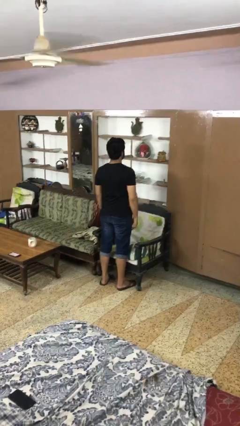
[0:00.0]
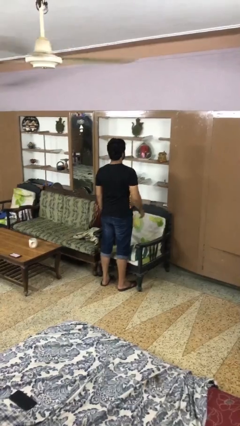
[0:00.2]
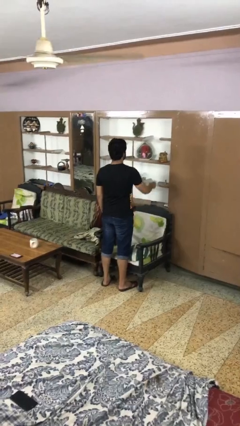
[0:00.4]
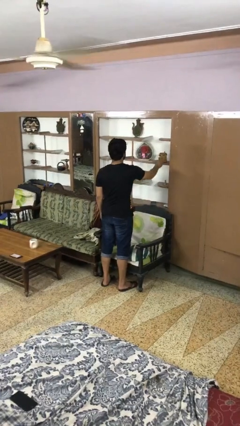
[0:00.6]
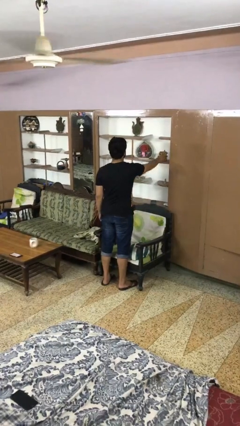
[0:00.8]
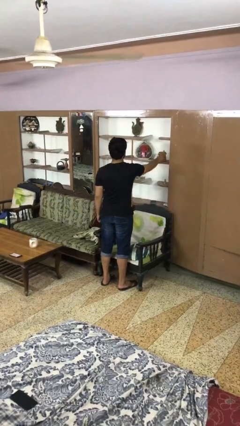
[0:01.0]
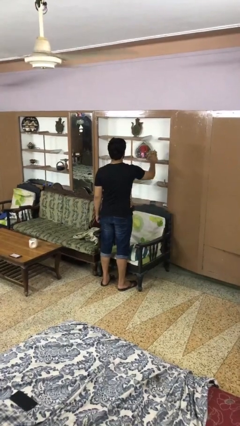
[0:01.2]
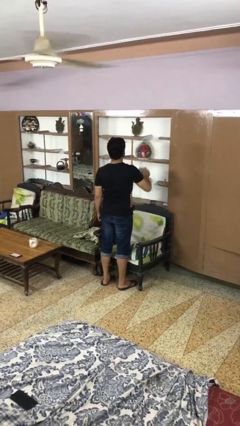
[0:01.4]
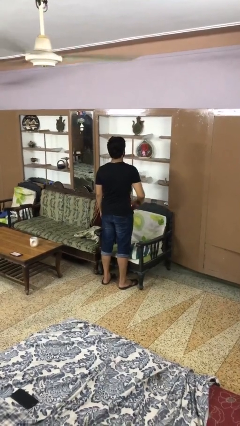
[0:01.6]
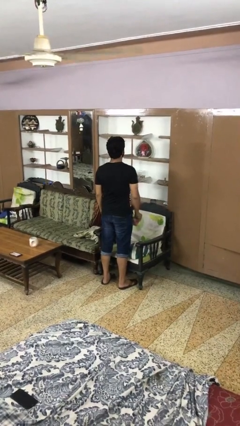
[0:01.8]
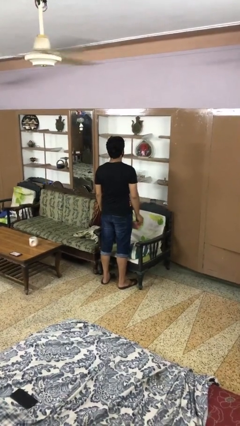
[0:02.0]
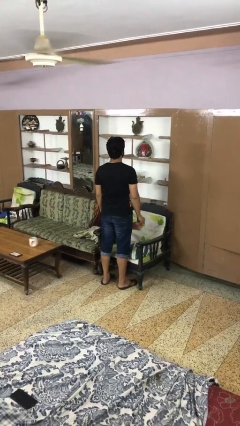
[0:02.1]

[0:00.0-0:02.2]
person picks up object from shelf

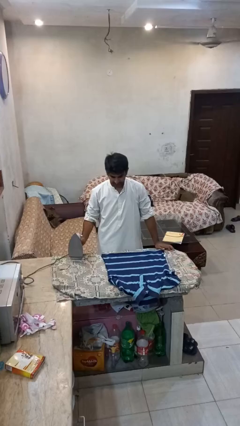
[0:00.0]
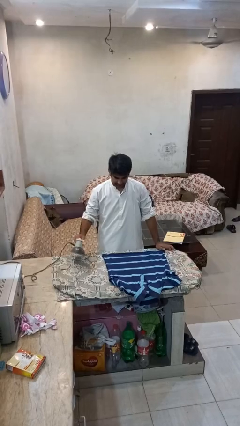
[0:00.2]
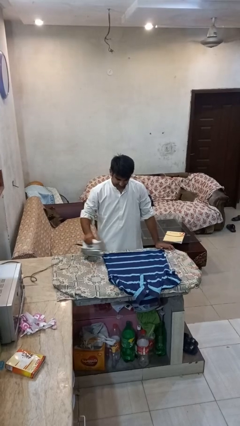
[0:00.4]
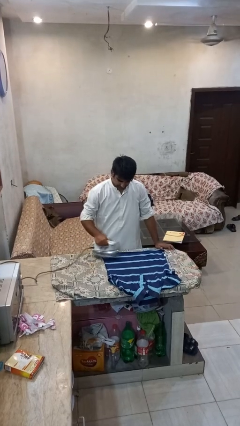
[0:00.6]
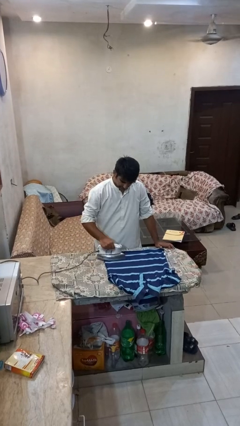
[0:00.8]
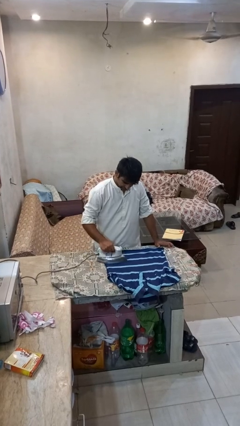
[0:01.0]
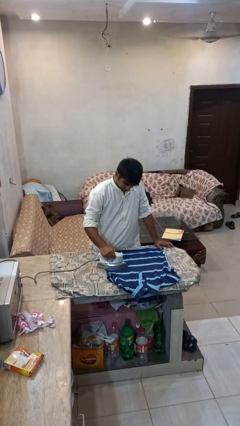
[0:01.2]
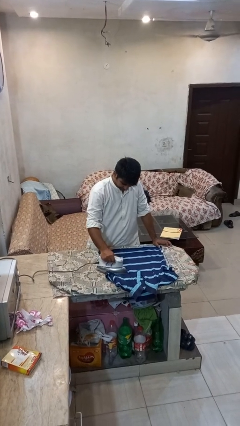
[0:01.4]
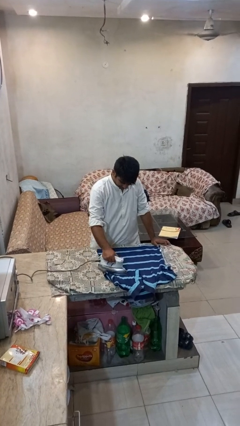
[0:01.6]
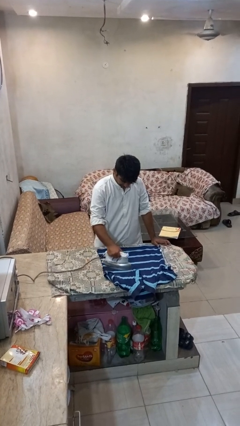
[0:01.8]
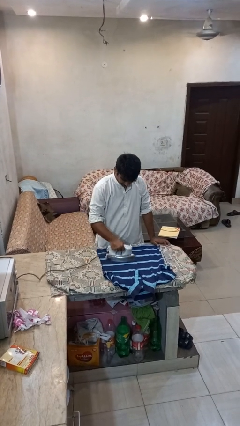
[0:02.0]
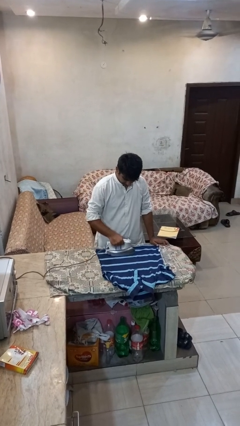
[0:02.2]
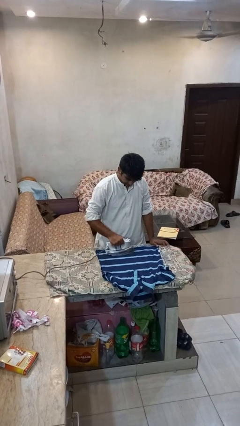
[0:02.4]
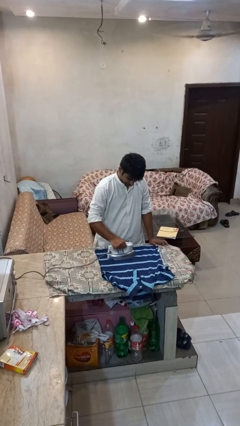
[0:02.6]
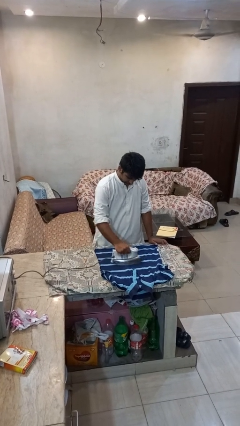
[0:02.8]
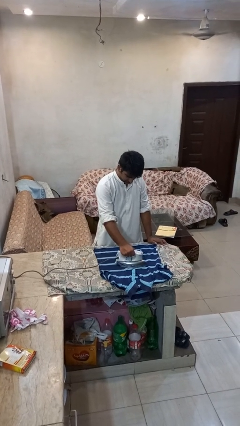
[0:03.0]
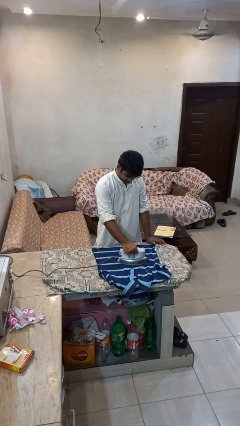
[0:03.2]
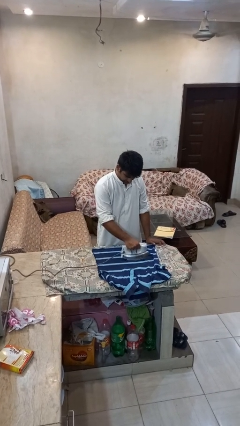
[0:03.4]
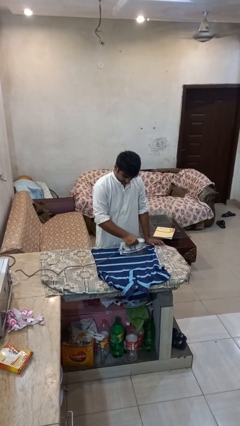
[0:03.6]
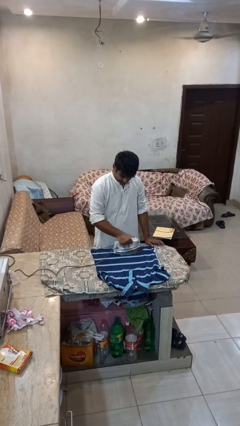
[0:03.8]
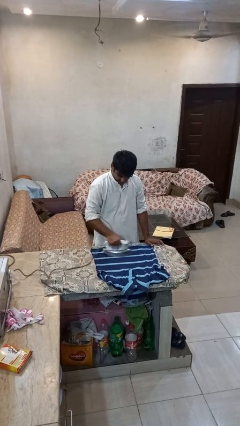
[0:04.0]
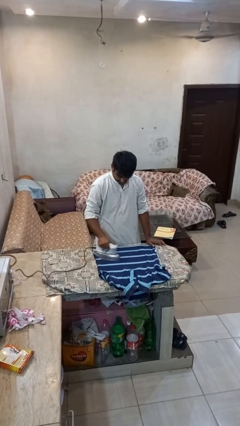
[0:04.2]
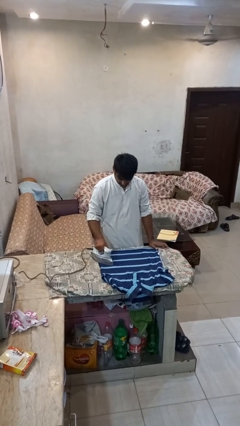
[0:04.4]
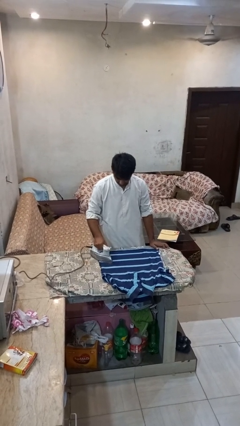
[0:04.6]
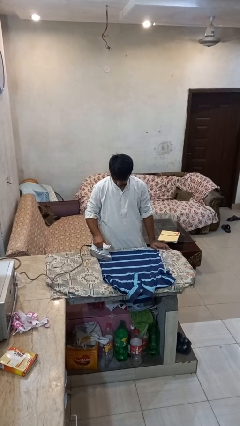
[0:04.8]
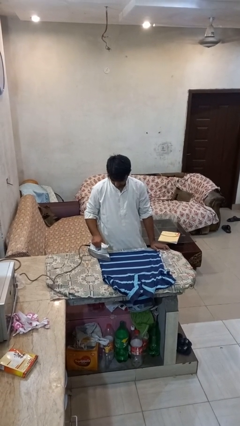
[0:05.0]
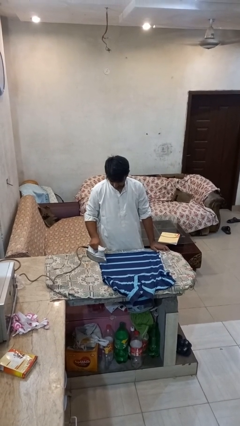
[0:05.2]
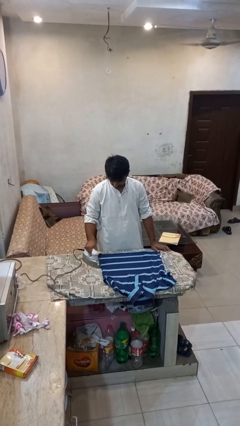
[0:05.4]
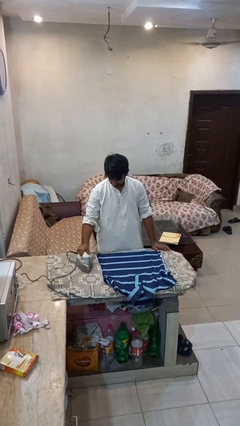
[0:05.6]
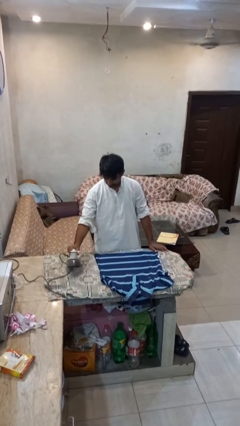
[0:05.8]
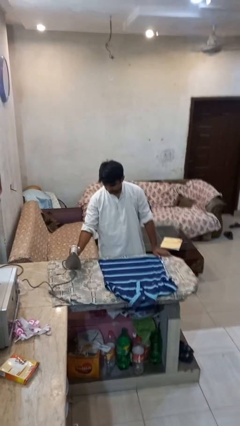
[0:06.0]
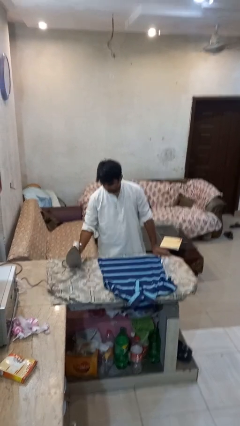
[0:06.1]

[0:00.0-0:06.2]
person irons clothes

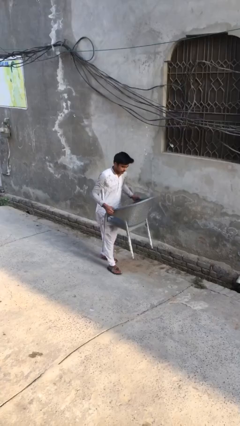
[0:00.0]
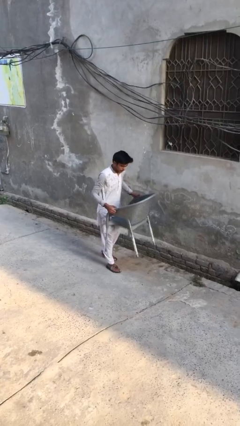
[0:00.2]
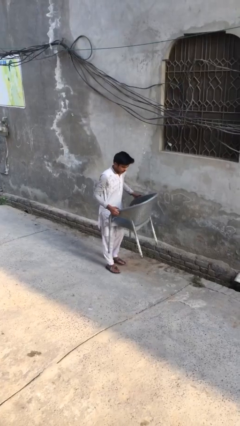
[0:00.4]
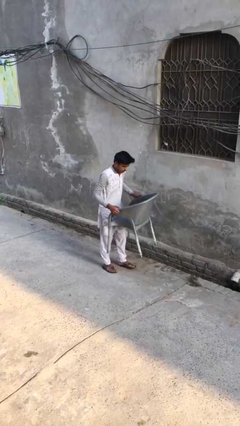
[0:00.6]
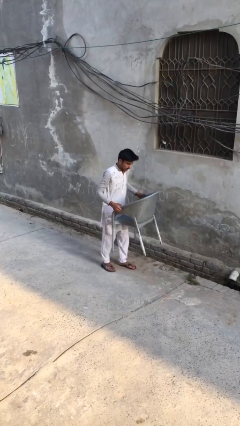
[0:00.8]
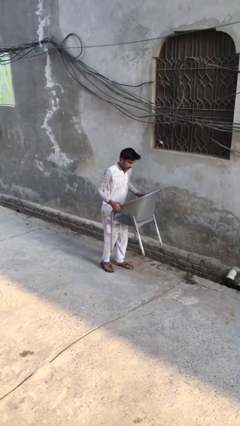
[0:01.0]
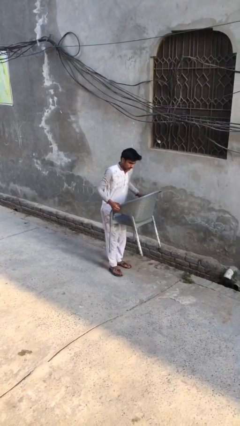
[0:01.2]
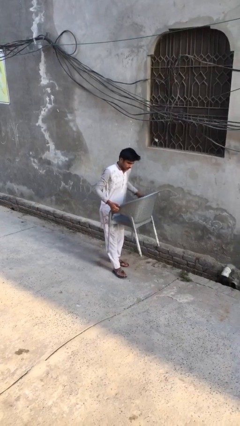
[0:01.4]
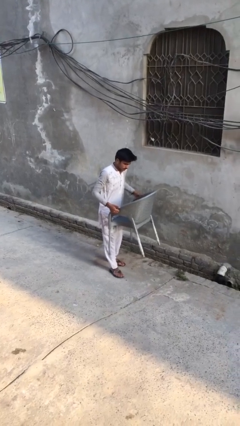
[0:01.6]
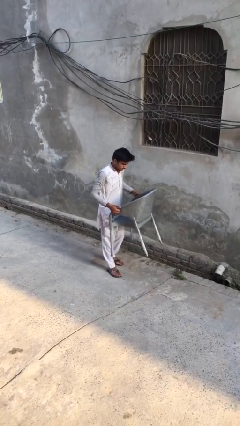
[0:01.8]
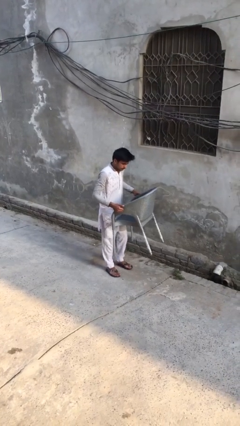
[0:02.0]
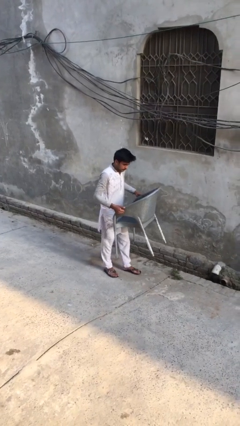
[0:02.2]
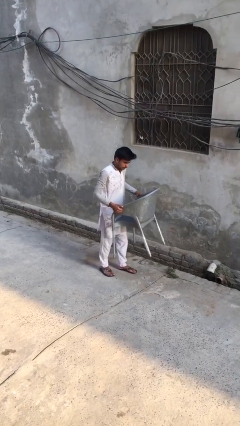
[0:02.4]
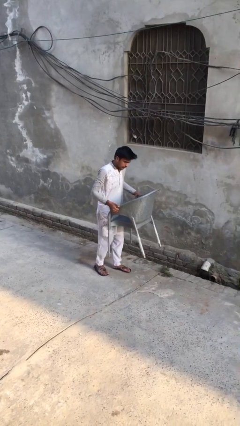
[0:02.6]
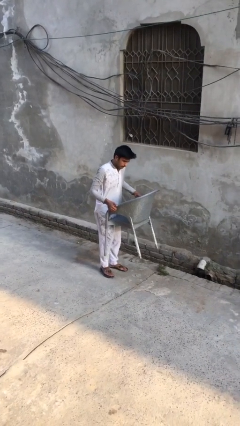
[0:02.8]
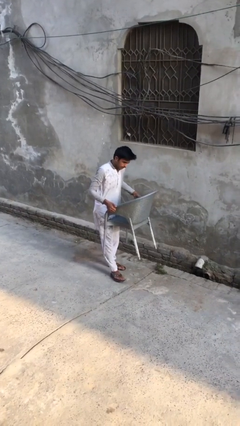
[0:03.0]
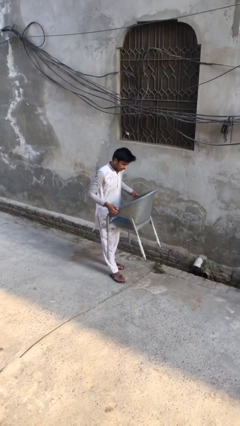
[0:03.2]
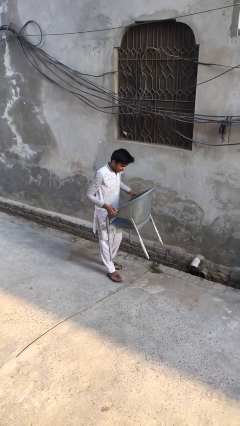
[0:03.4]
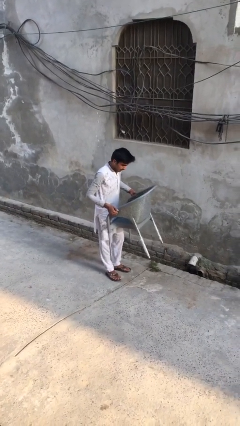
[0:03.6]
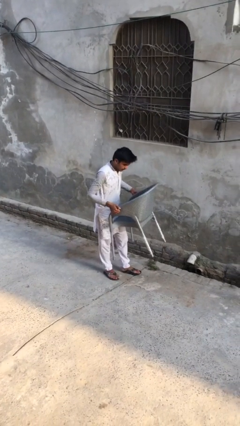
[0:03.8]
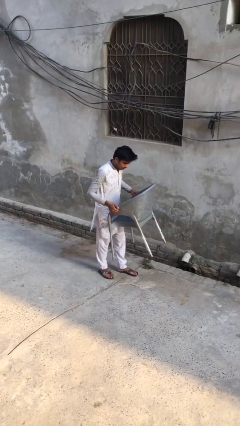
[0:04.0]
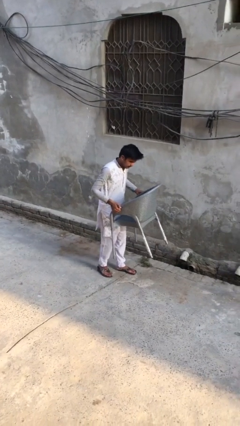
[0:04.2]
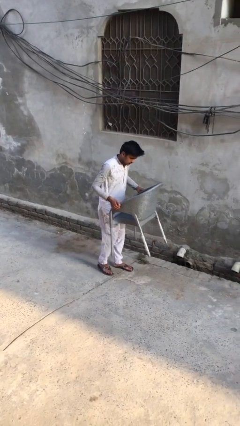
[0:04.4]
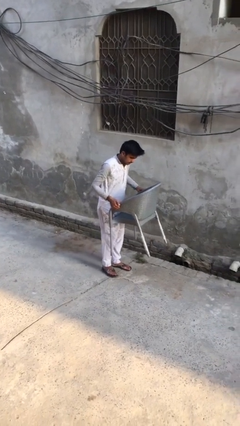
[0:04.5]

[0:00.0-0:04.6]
person carries heavy object

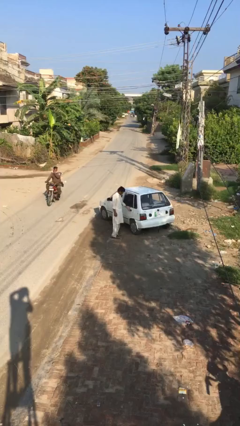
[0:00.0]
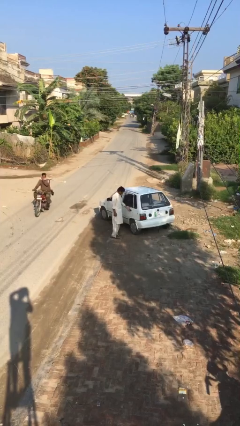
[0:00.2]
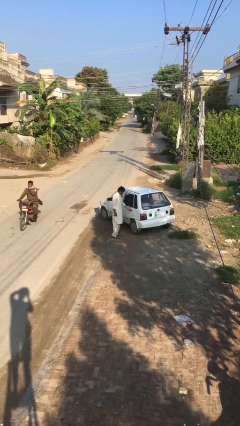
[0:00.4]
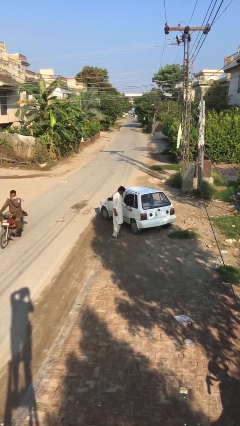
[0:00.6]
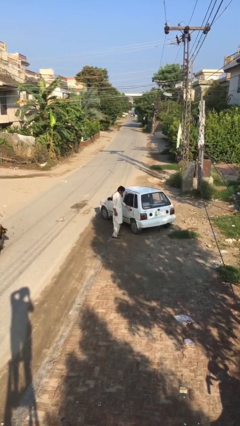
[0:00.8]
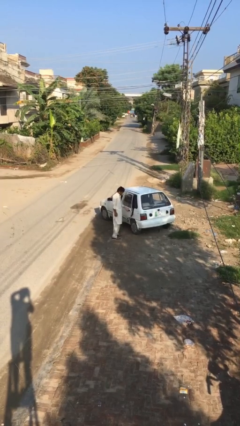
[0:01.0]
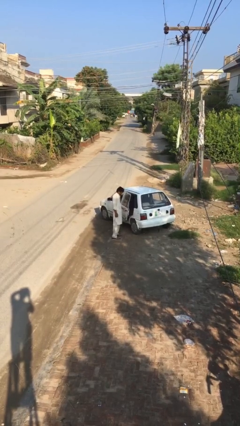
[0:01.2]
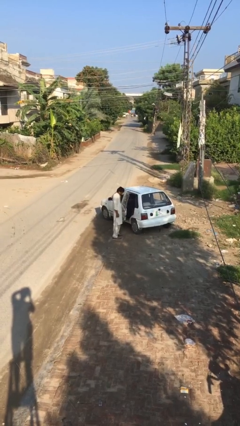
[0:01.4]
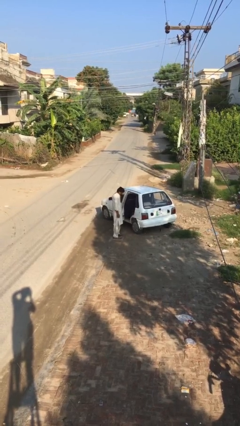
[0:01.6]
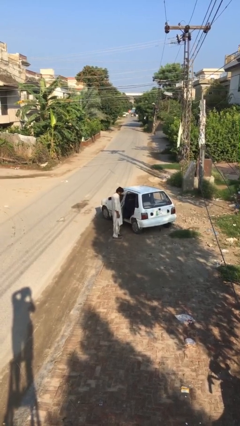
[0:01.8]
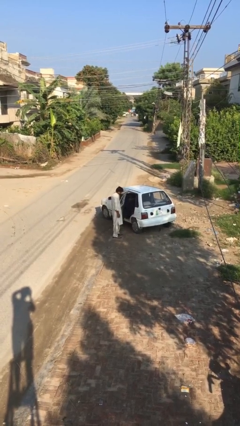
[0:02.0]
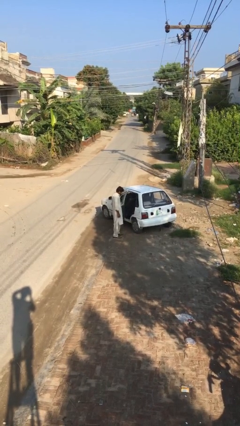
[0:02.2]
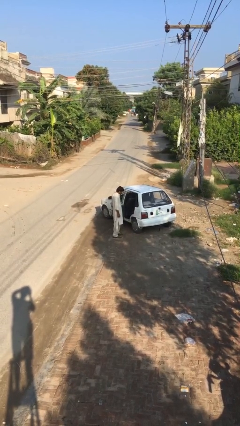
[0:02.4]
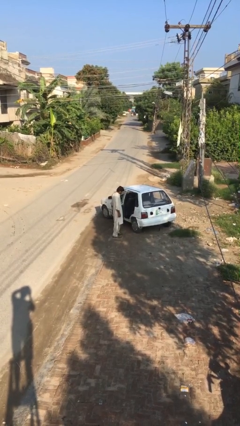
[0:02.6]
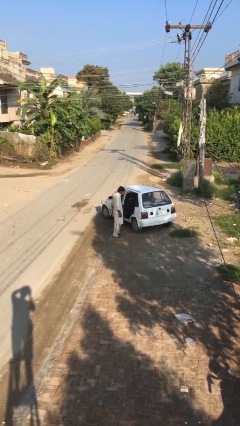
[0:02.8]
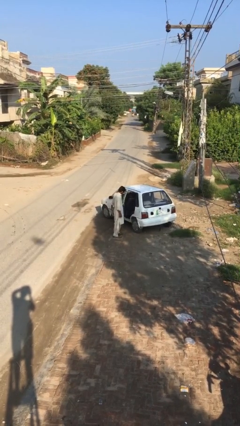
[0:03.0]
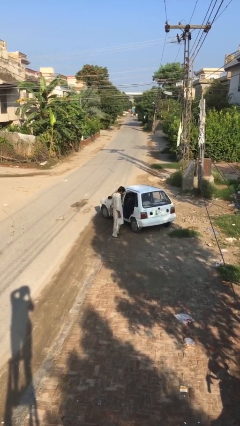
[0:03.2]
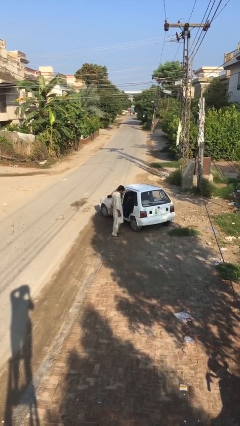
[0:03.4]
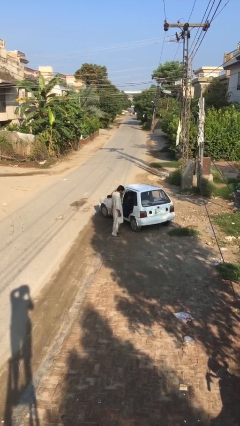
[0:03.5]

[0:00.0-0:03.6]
person opens car door

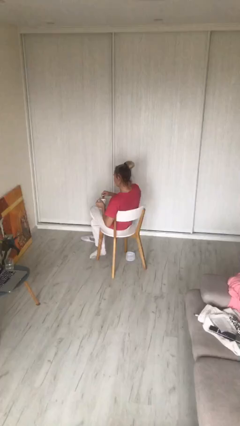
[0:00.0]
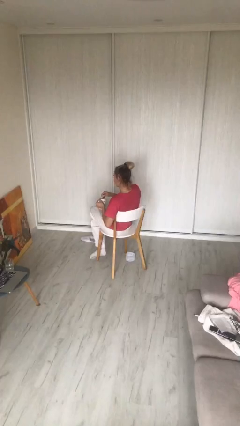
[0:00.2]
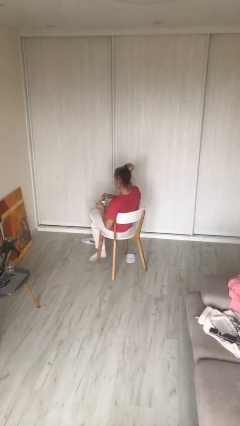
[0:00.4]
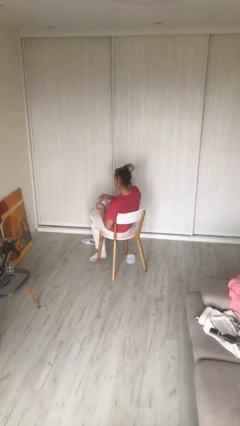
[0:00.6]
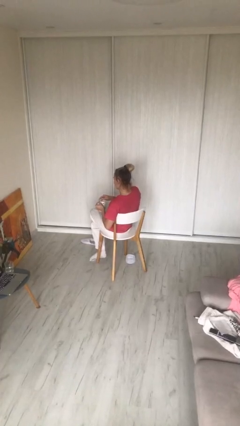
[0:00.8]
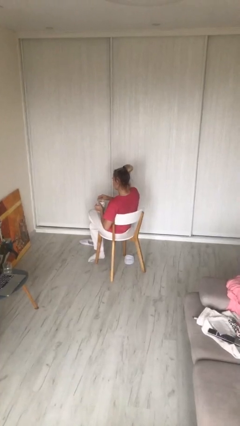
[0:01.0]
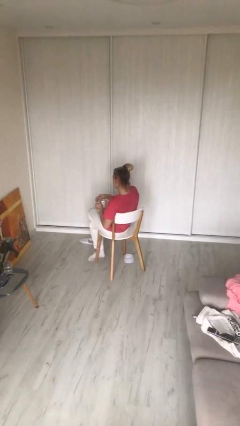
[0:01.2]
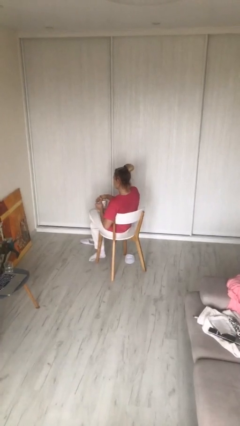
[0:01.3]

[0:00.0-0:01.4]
person stirs mug
